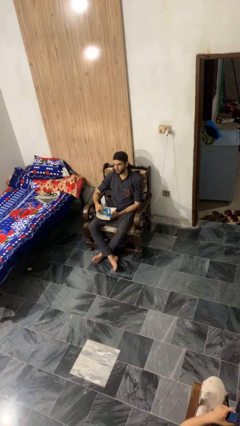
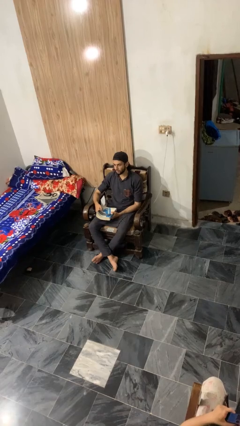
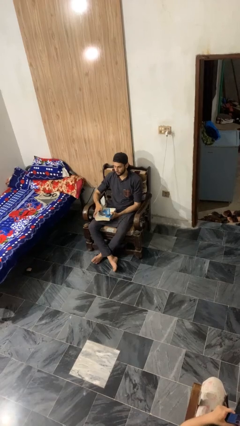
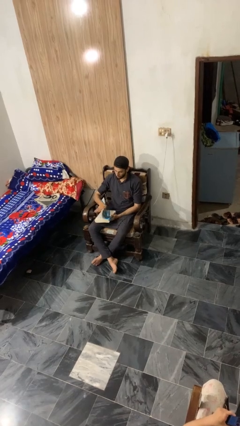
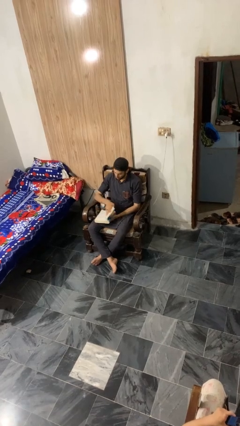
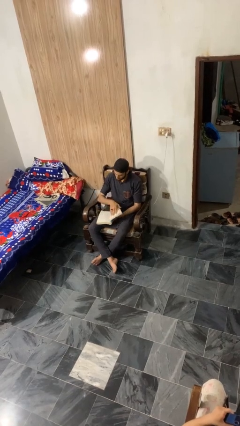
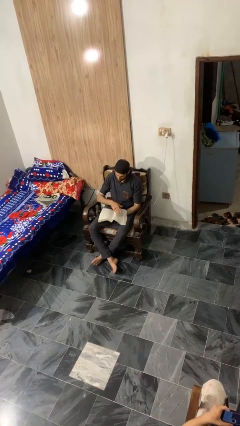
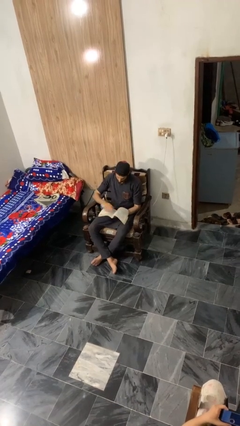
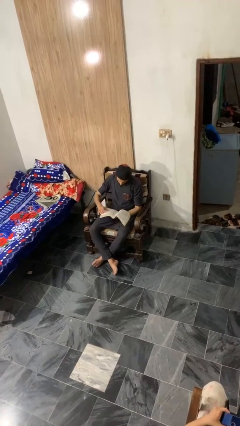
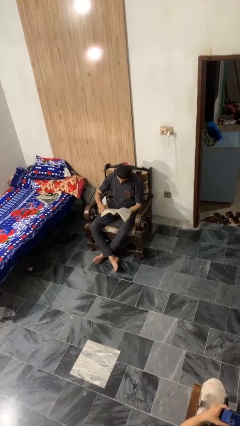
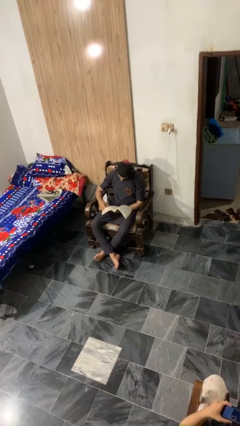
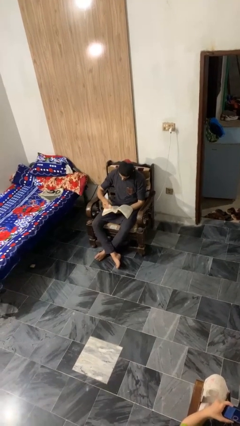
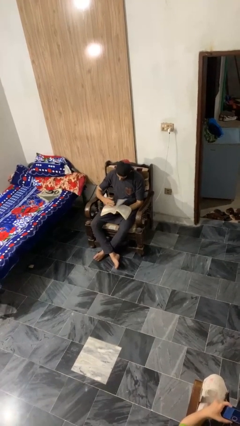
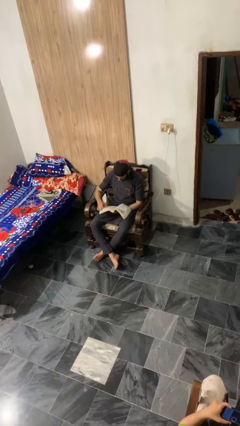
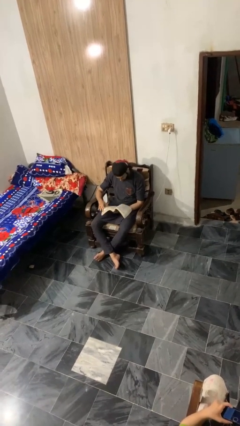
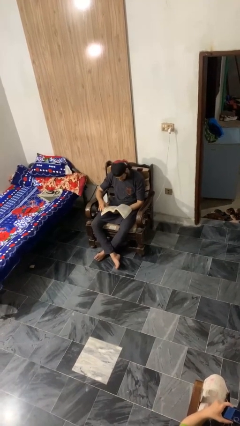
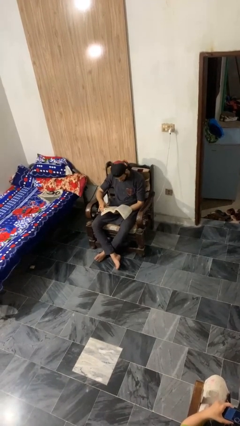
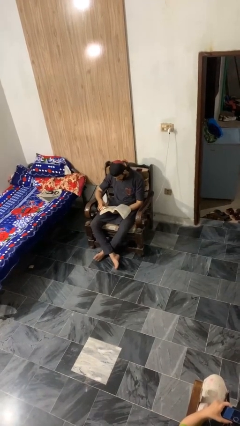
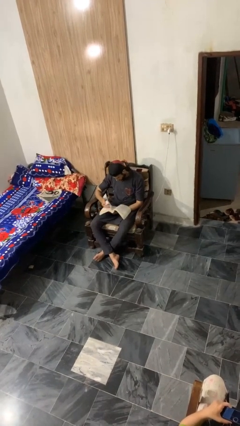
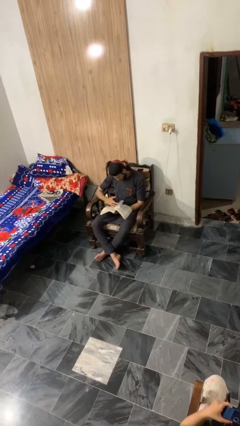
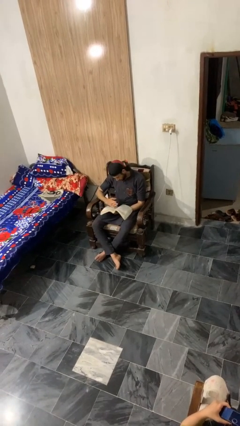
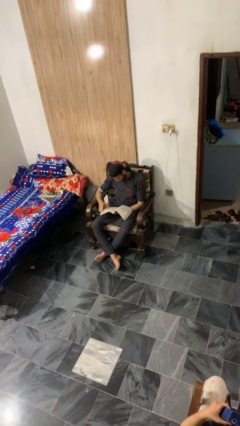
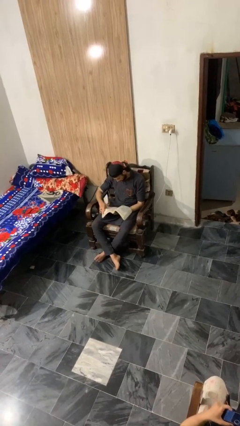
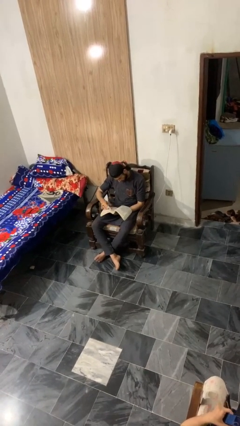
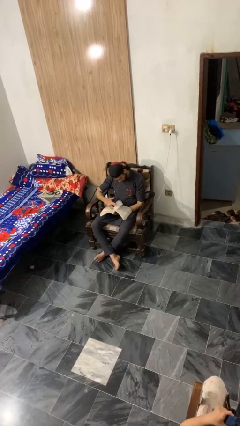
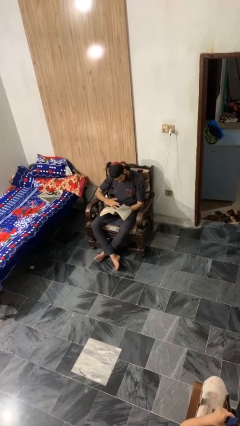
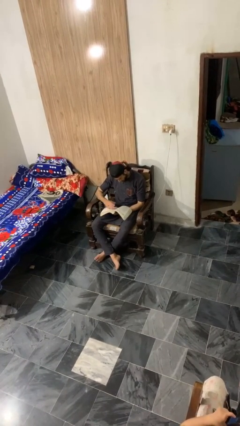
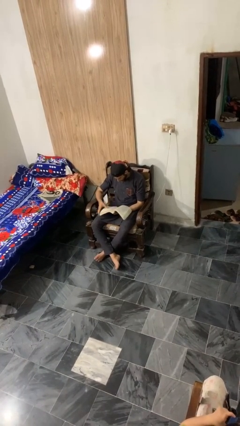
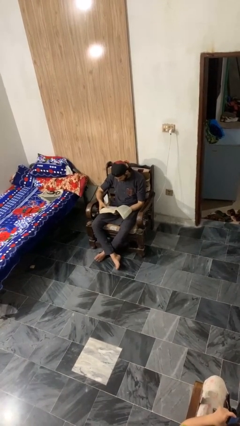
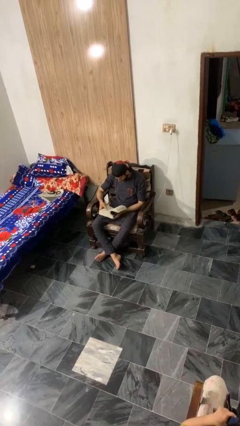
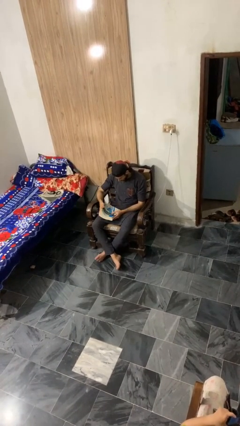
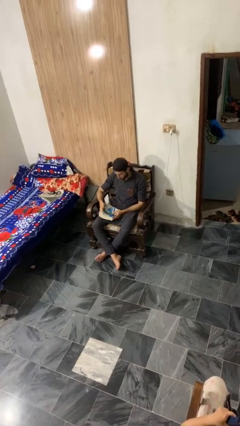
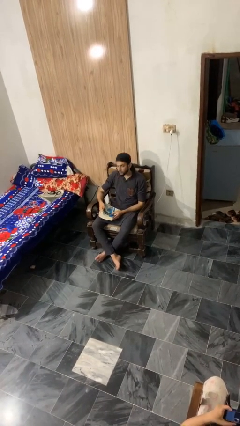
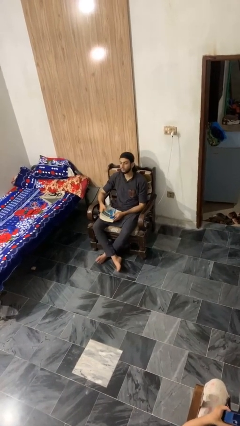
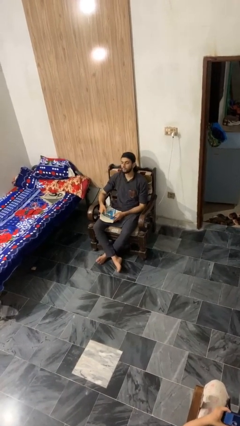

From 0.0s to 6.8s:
person reads book

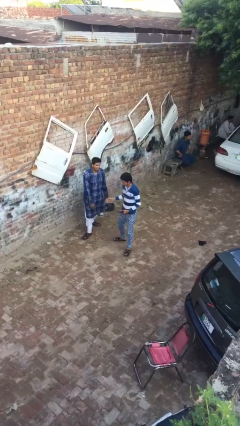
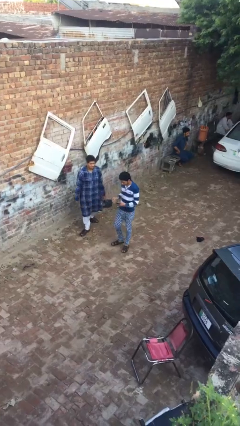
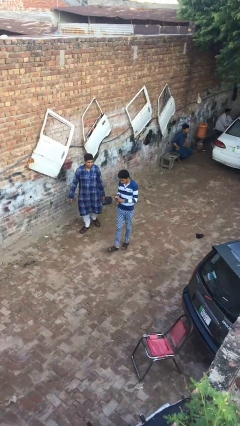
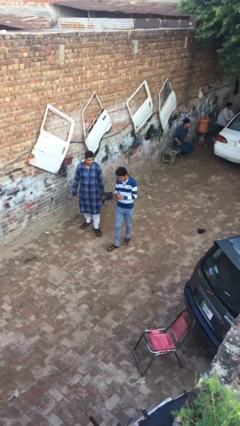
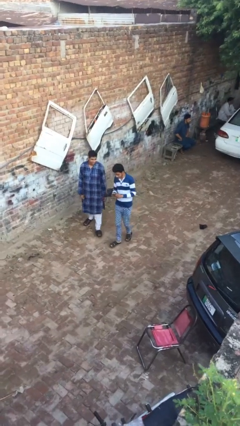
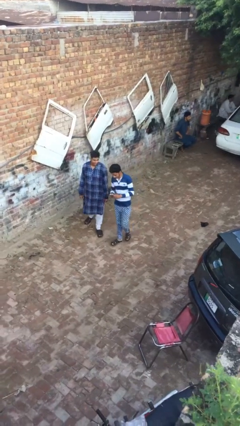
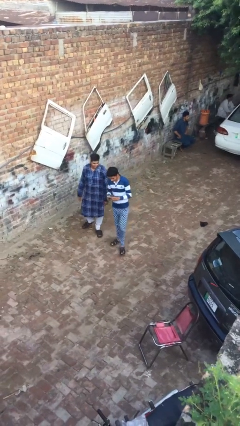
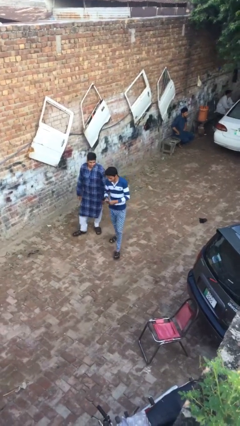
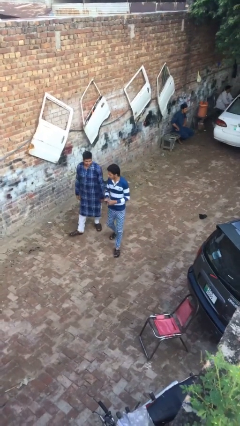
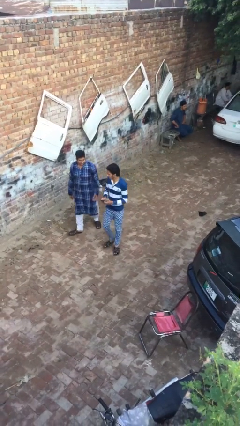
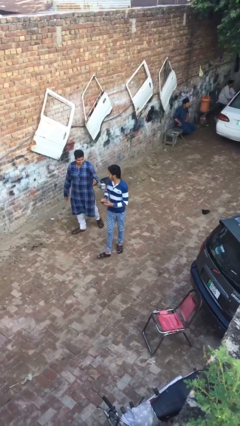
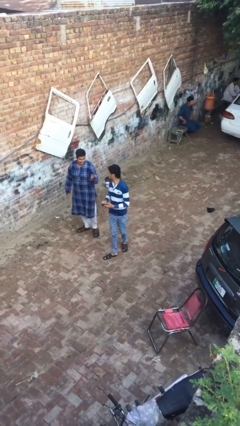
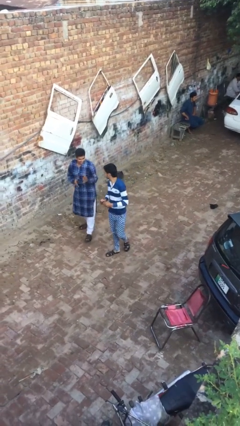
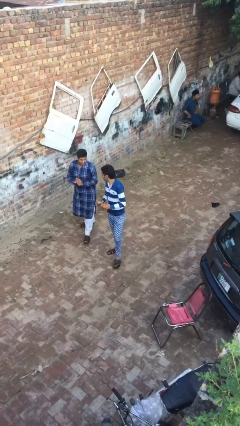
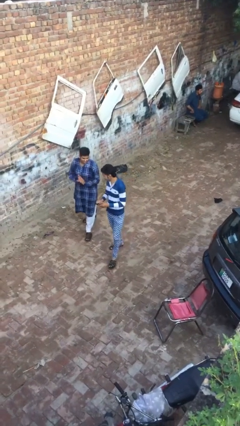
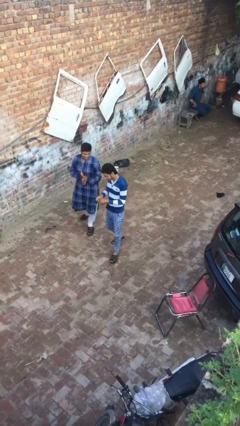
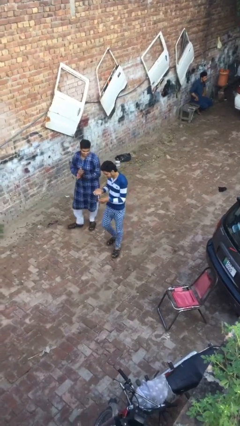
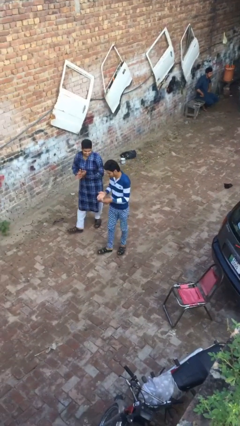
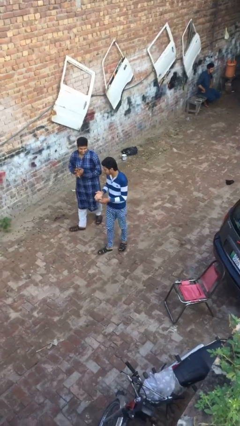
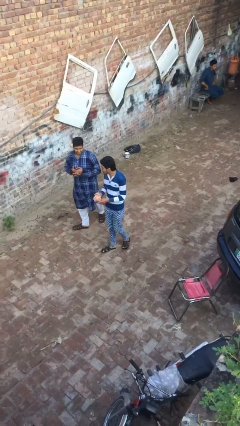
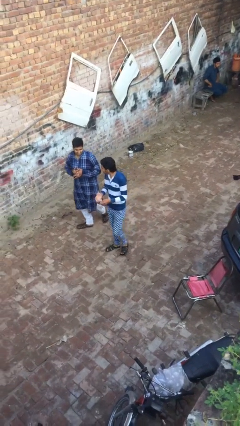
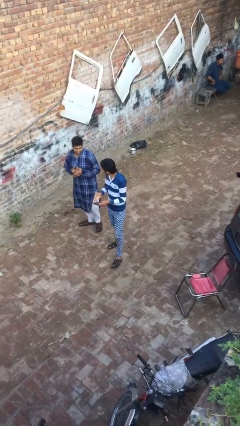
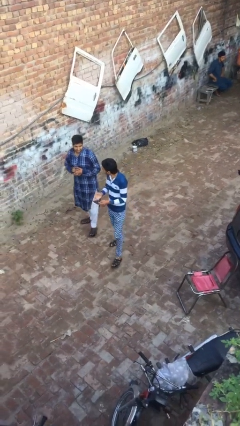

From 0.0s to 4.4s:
person talks to person

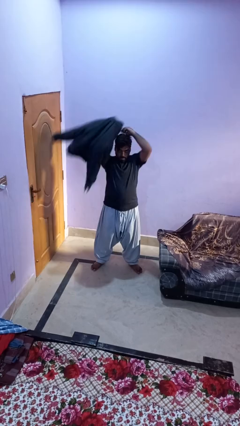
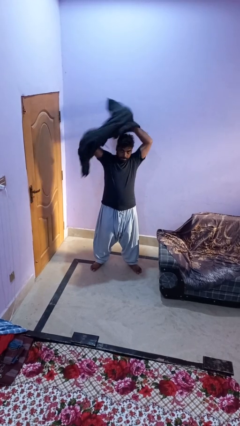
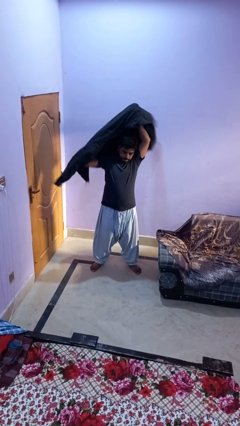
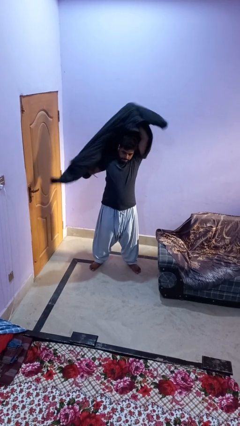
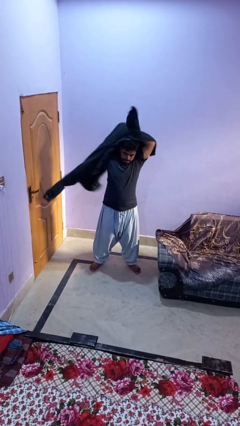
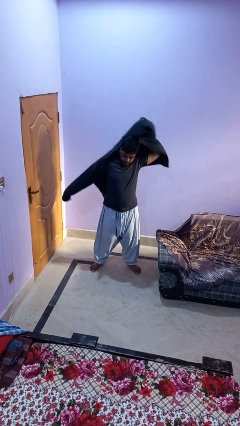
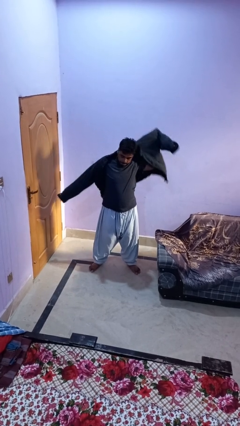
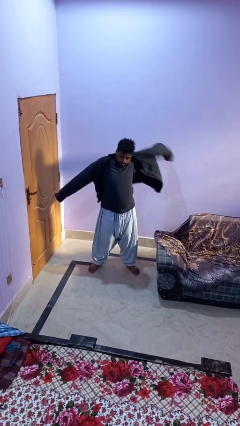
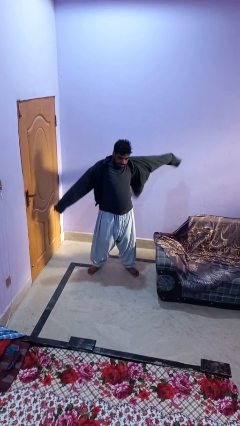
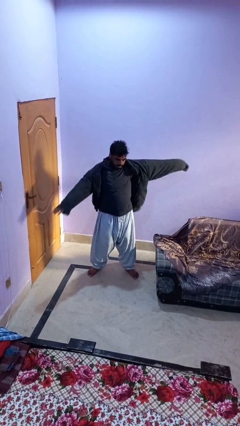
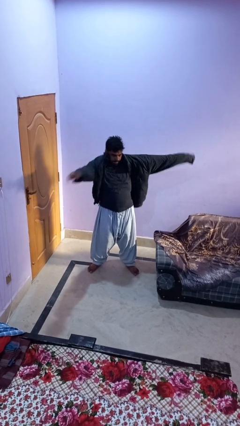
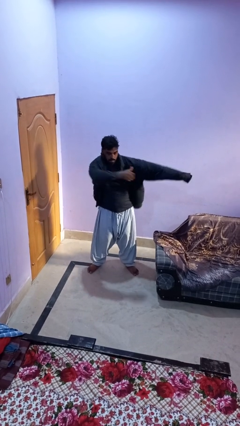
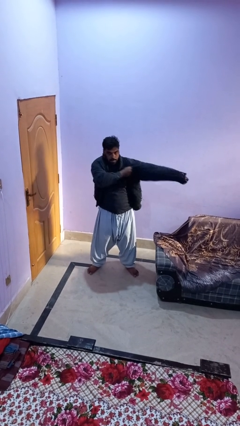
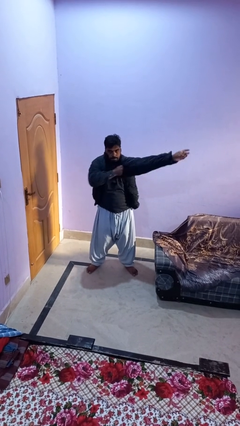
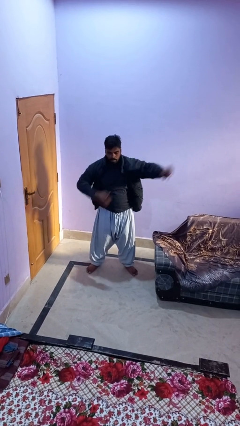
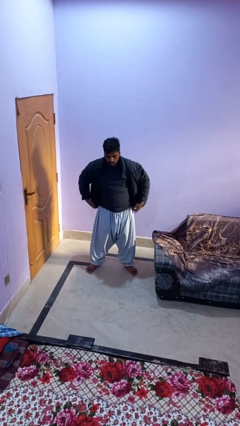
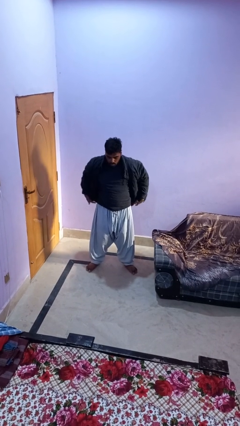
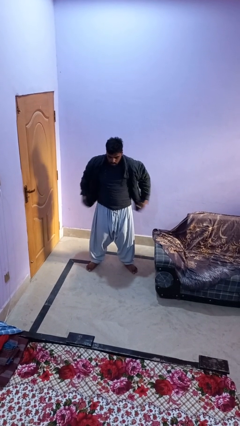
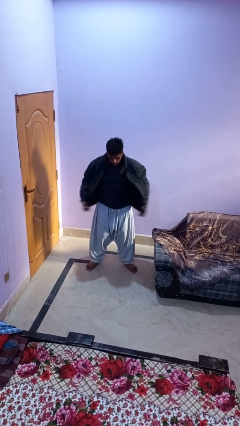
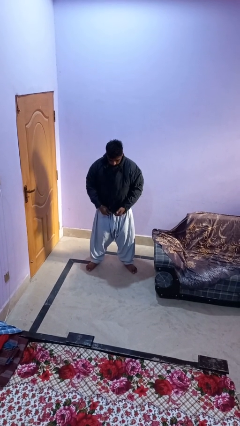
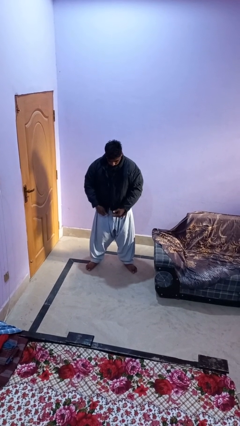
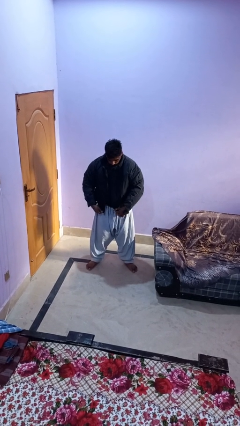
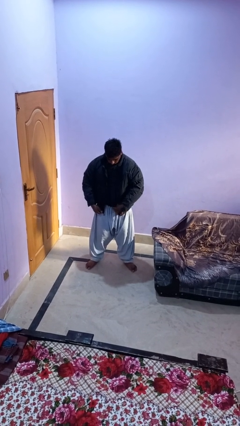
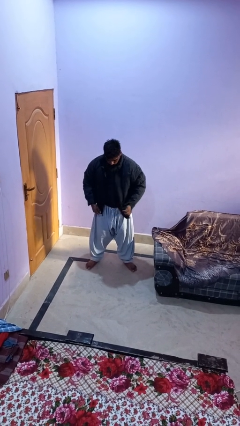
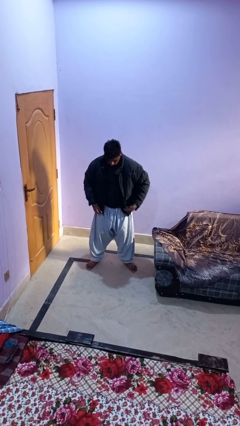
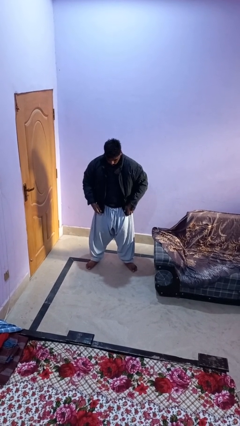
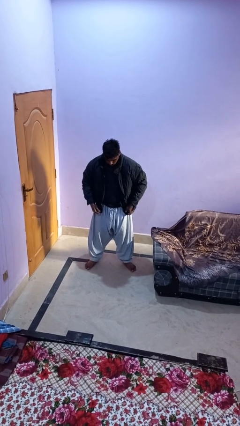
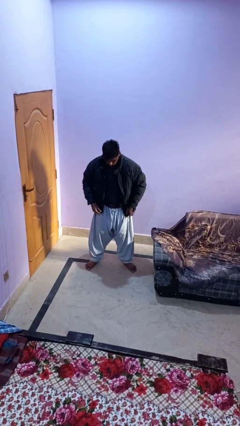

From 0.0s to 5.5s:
person puts on jacket

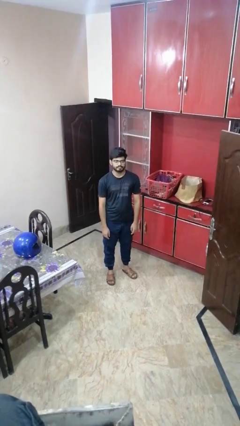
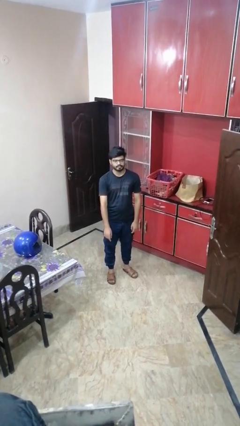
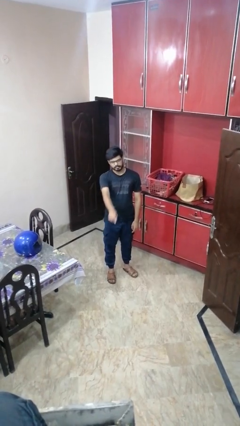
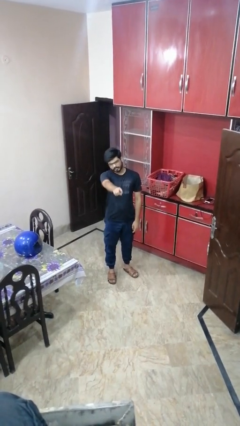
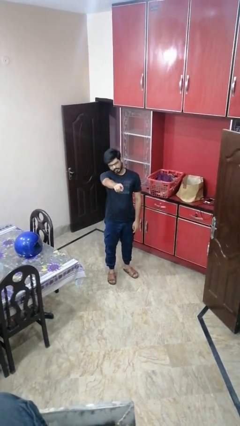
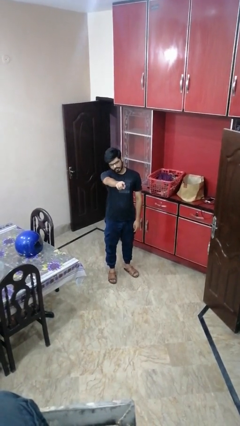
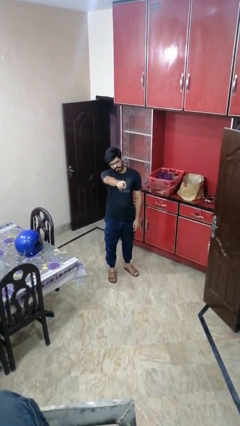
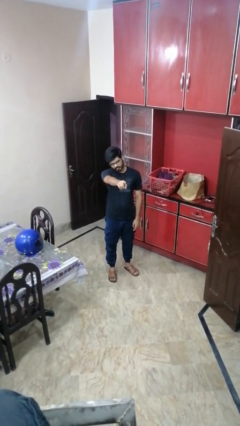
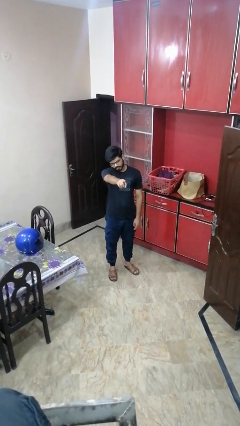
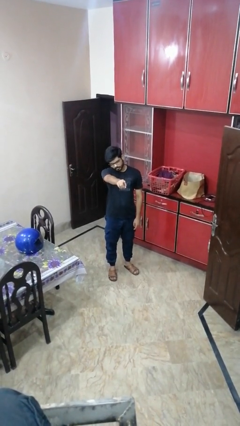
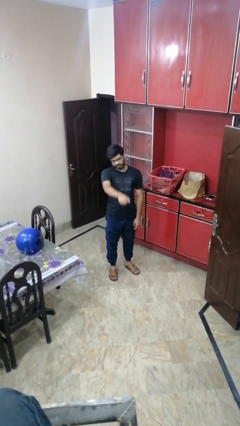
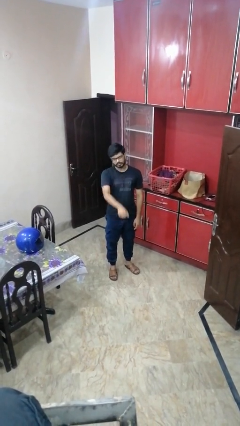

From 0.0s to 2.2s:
person points at person
